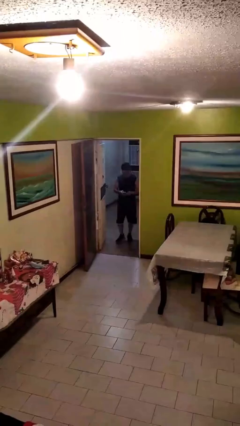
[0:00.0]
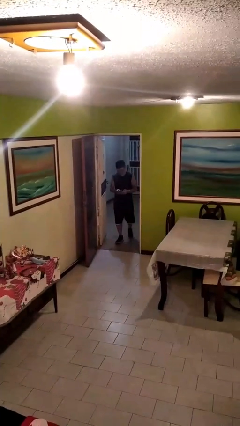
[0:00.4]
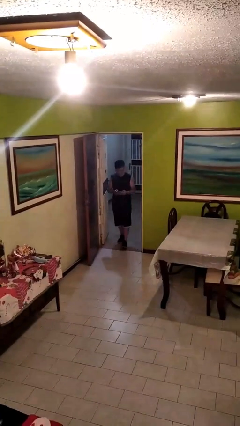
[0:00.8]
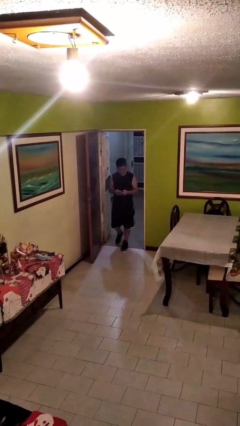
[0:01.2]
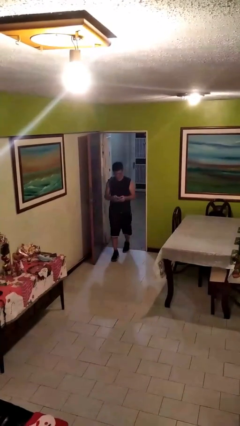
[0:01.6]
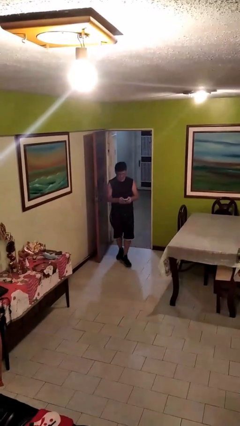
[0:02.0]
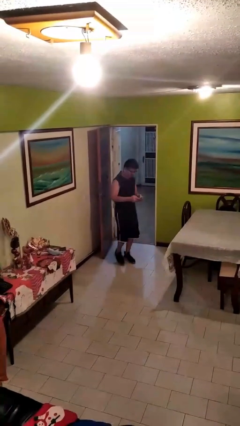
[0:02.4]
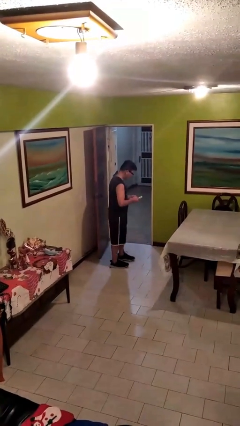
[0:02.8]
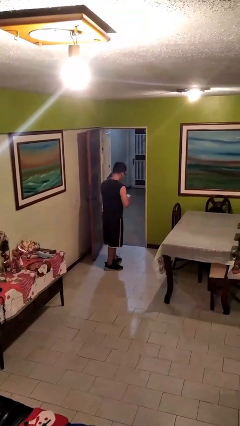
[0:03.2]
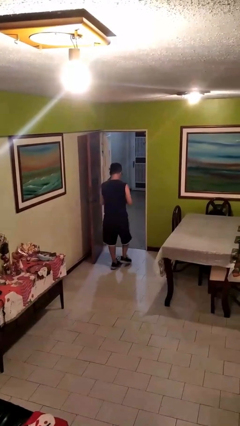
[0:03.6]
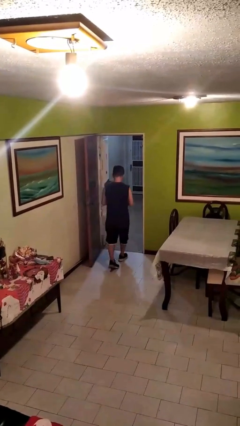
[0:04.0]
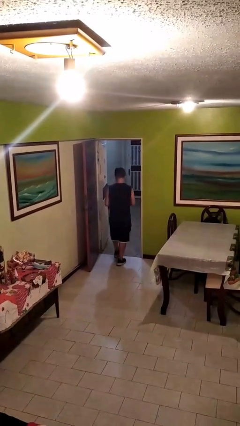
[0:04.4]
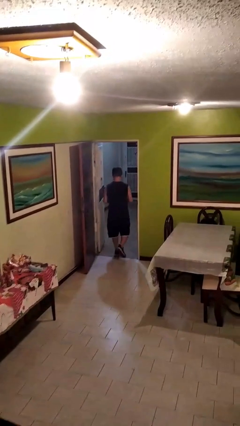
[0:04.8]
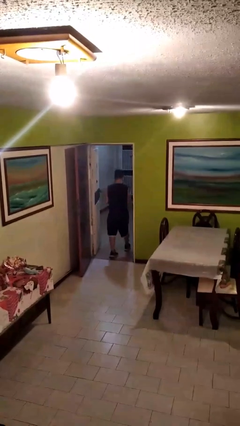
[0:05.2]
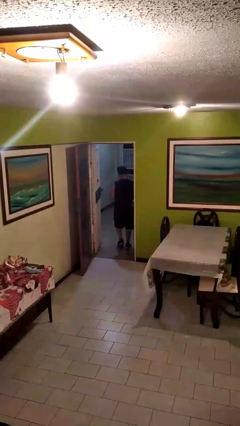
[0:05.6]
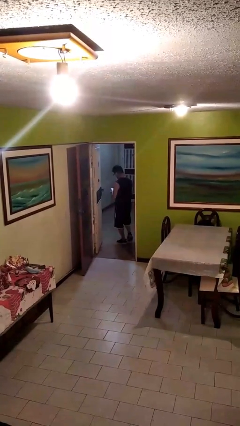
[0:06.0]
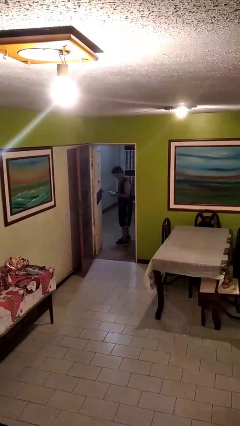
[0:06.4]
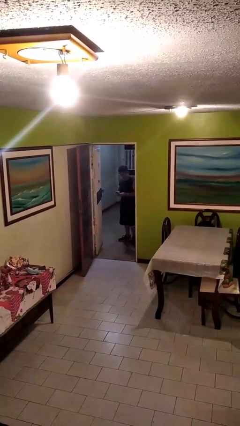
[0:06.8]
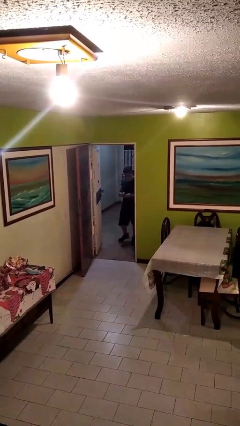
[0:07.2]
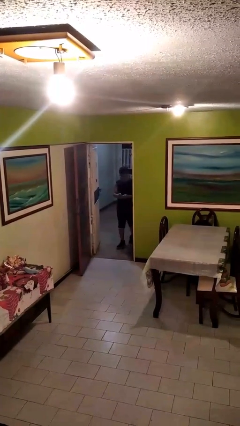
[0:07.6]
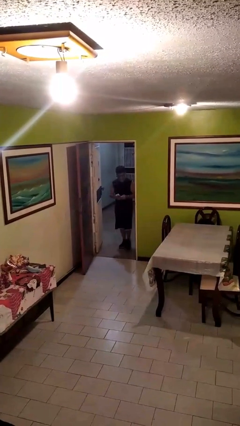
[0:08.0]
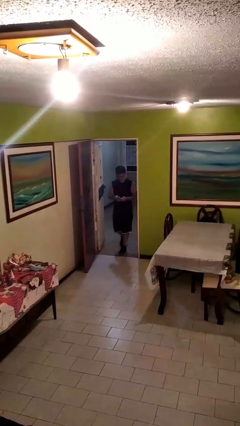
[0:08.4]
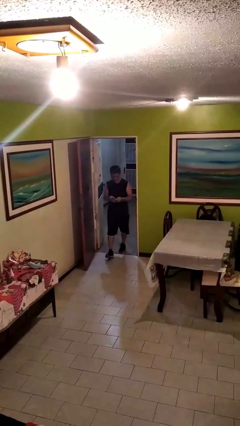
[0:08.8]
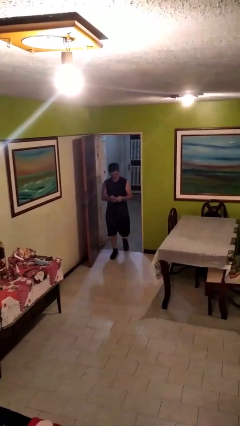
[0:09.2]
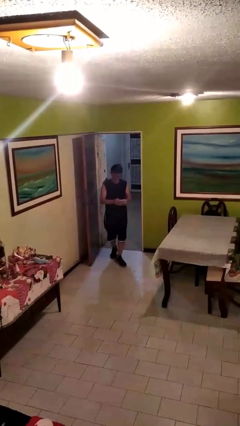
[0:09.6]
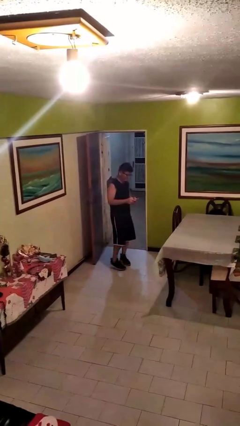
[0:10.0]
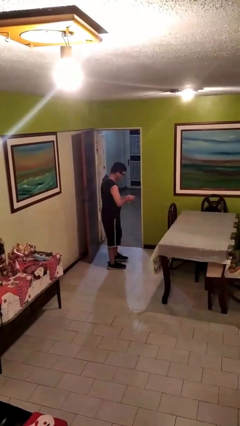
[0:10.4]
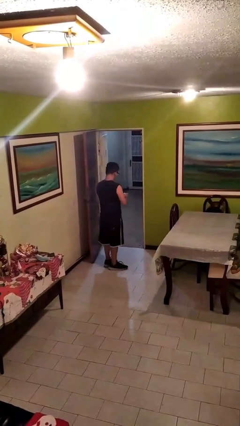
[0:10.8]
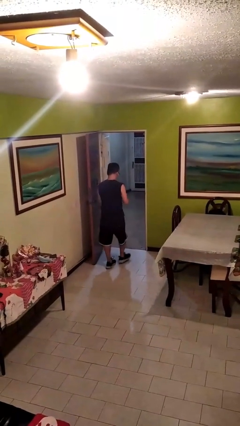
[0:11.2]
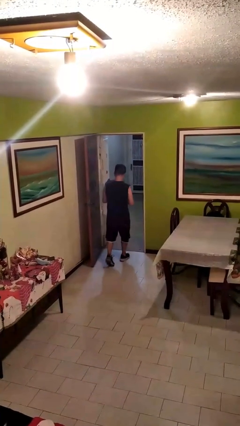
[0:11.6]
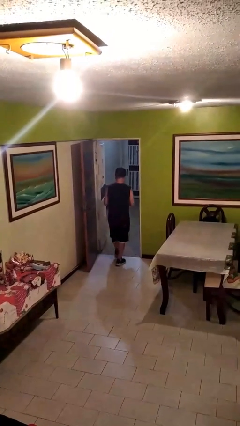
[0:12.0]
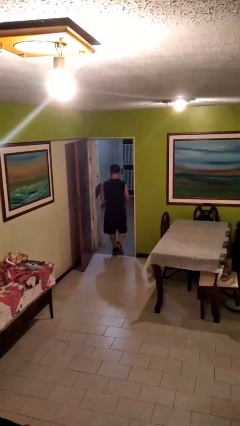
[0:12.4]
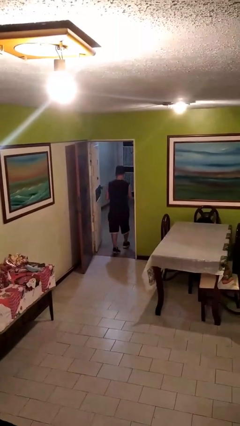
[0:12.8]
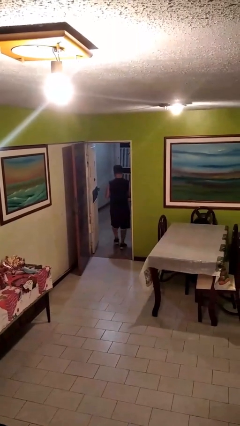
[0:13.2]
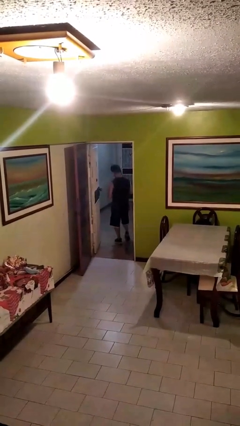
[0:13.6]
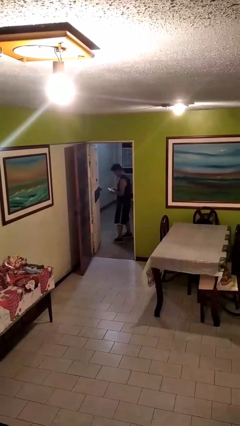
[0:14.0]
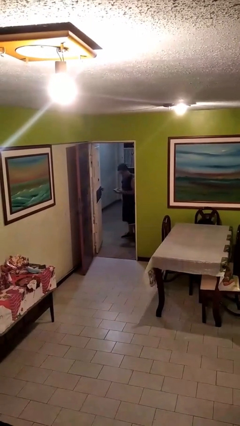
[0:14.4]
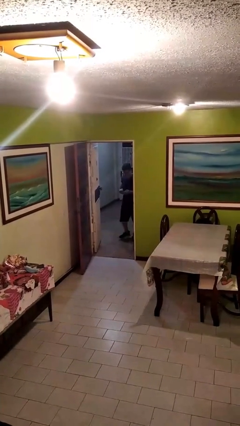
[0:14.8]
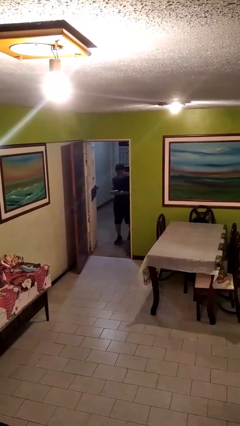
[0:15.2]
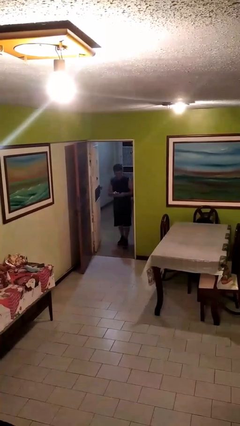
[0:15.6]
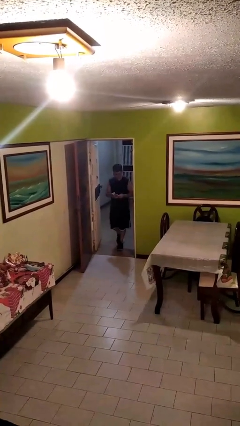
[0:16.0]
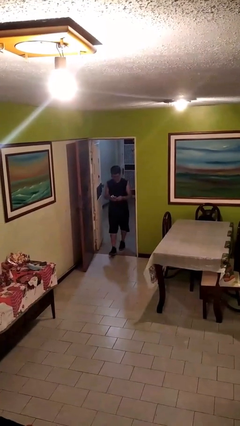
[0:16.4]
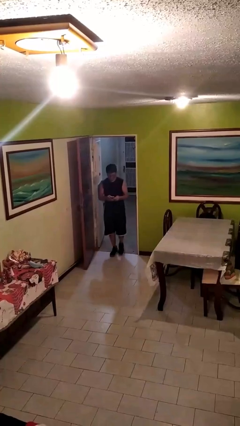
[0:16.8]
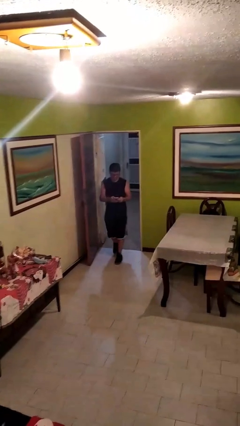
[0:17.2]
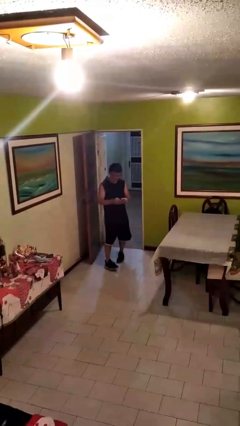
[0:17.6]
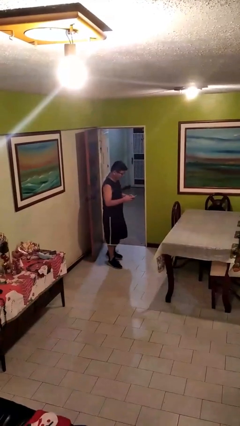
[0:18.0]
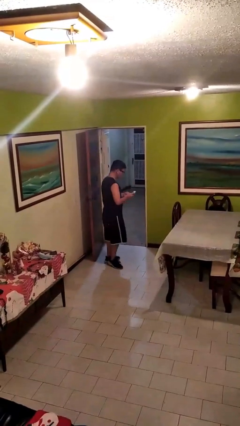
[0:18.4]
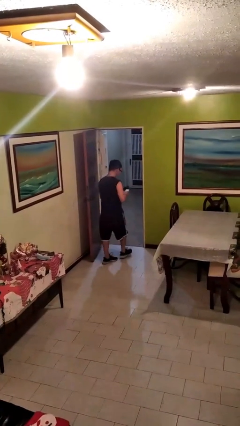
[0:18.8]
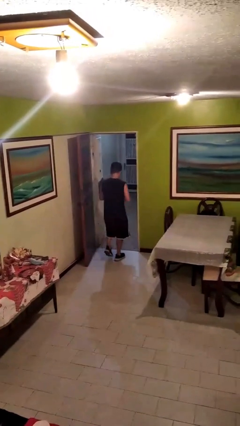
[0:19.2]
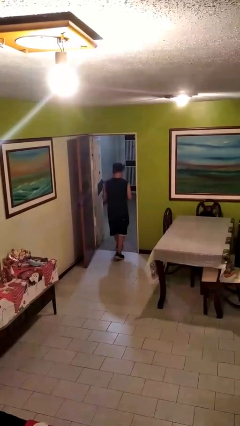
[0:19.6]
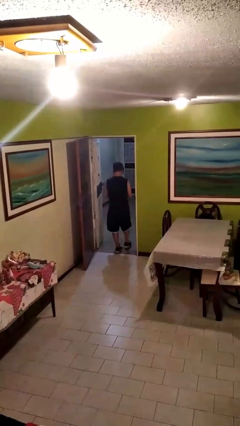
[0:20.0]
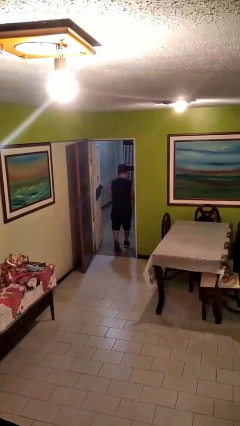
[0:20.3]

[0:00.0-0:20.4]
person texts on phone

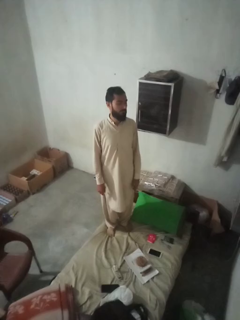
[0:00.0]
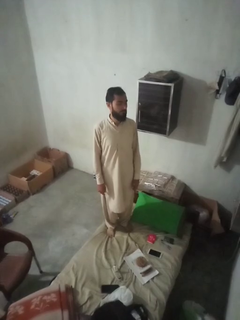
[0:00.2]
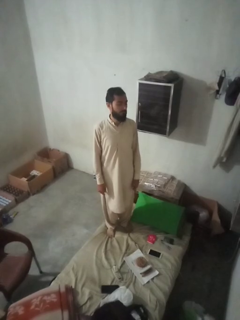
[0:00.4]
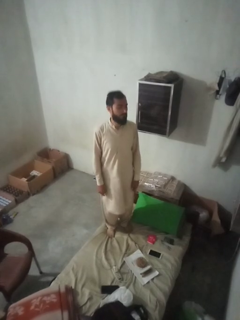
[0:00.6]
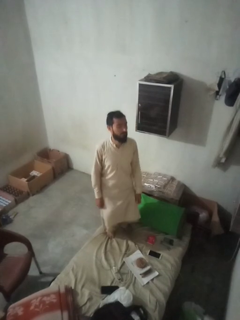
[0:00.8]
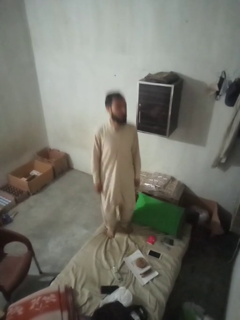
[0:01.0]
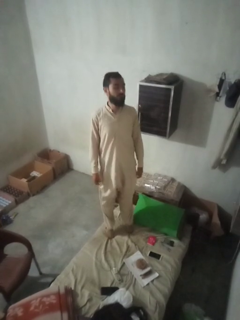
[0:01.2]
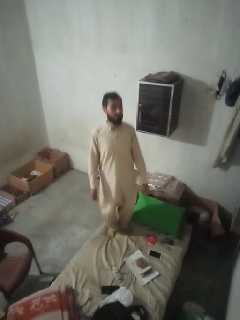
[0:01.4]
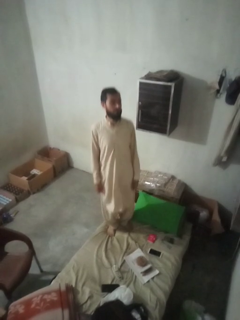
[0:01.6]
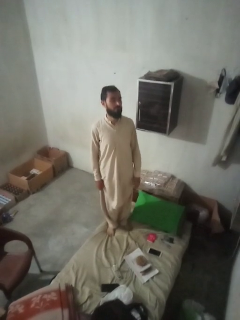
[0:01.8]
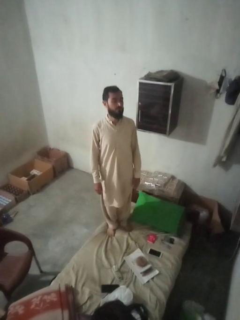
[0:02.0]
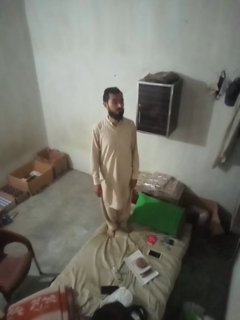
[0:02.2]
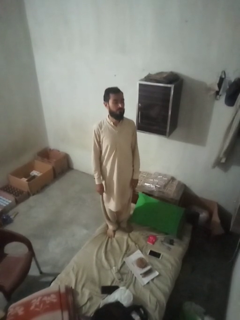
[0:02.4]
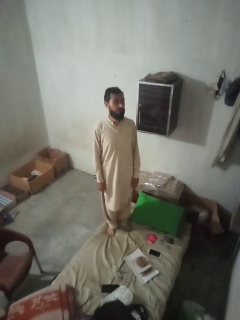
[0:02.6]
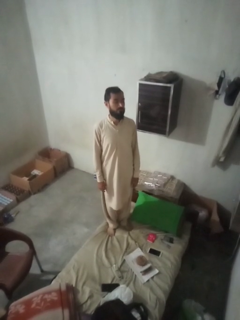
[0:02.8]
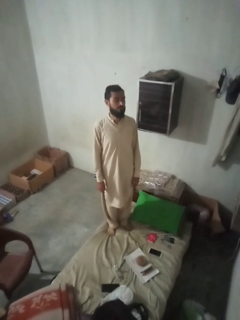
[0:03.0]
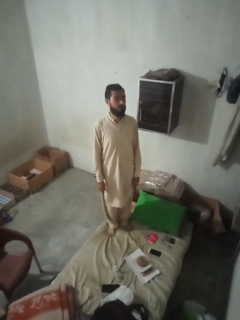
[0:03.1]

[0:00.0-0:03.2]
person jumps on bed

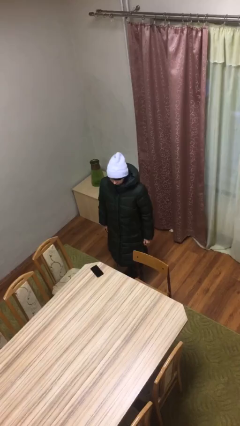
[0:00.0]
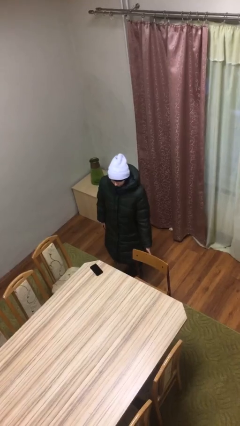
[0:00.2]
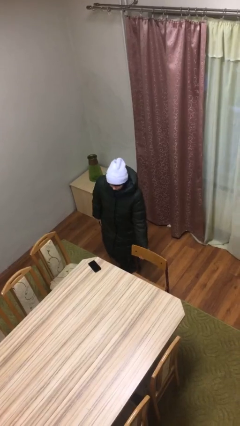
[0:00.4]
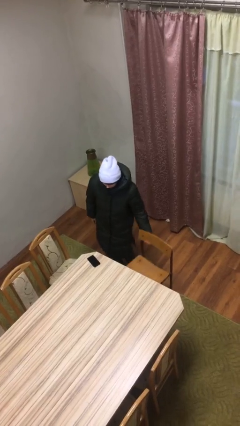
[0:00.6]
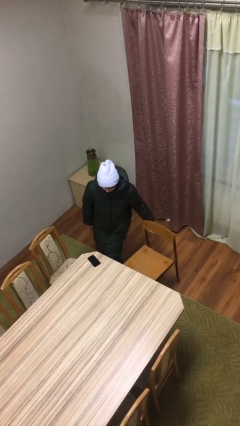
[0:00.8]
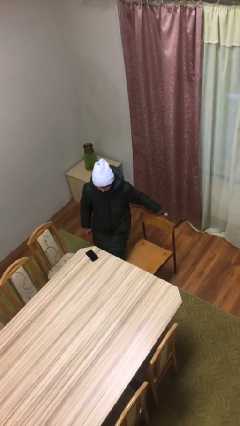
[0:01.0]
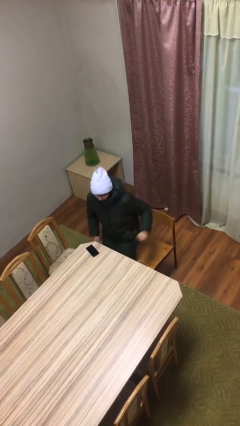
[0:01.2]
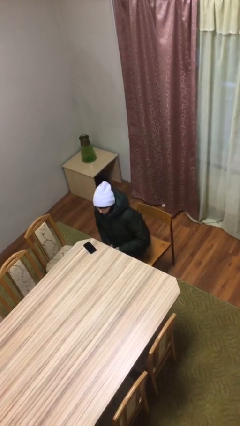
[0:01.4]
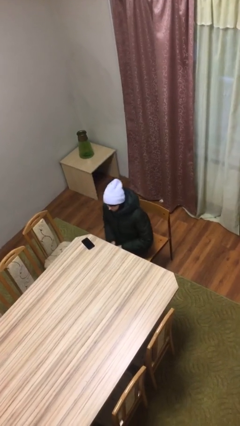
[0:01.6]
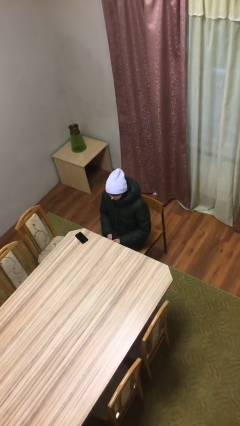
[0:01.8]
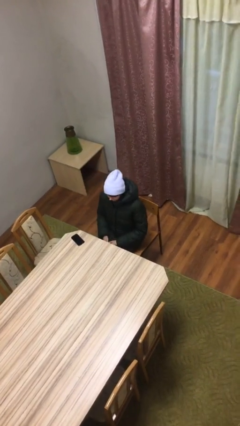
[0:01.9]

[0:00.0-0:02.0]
person sits down

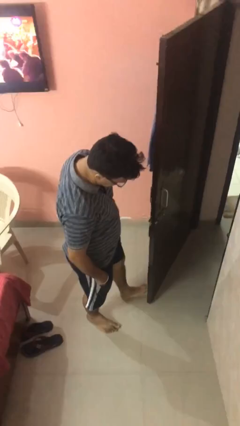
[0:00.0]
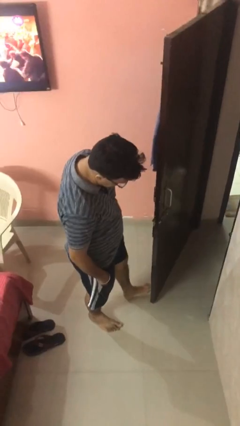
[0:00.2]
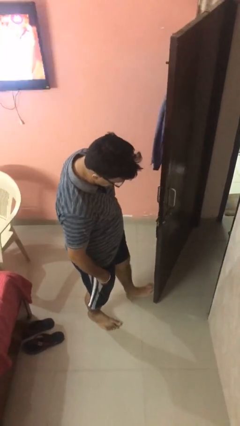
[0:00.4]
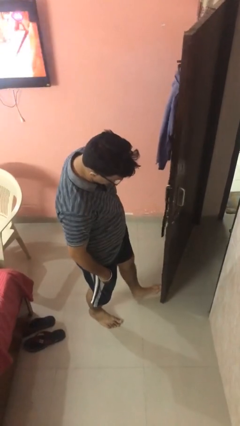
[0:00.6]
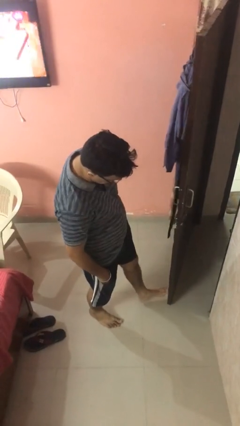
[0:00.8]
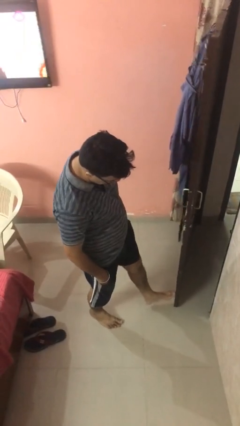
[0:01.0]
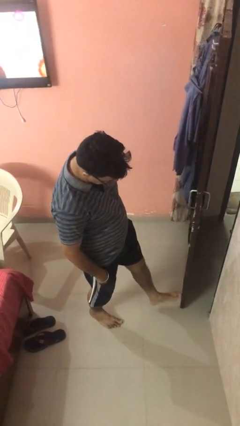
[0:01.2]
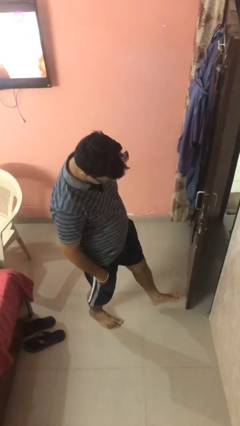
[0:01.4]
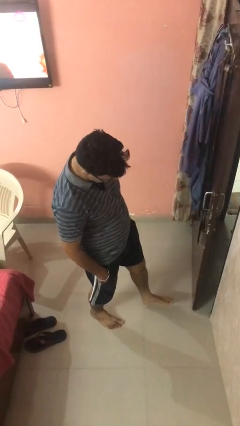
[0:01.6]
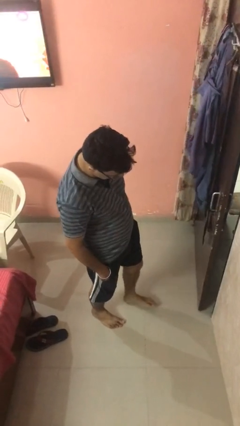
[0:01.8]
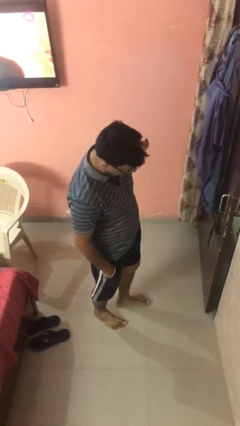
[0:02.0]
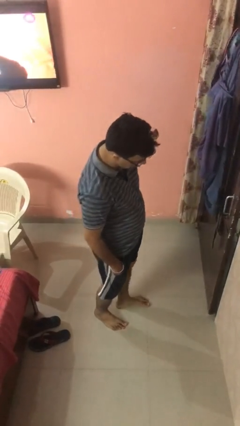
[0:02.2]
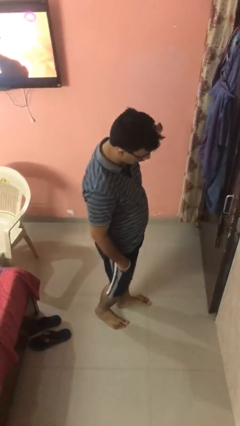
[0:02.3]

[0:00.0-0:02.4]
person closes door with foot

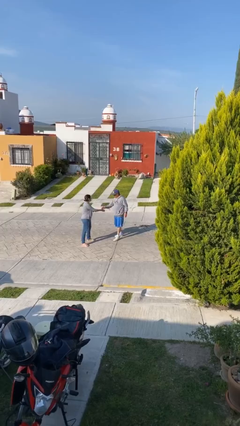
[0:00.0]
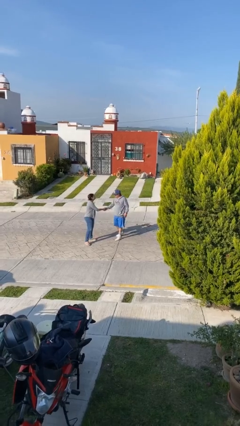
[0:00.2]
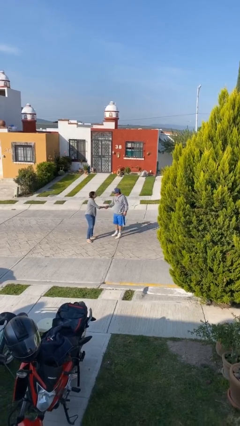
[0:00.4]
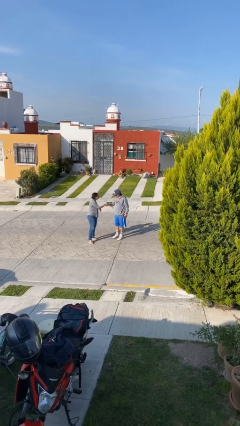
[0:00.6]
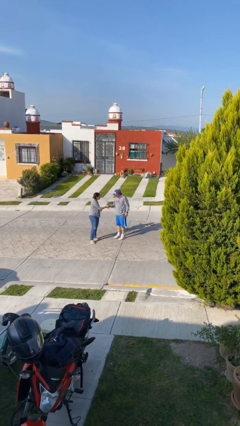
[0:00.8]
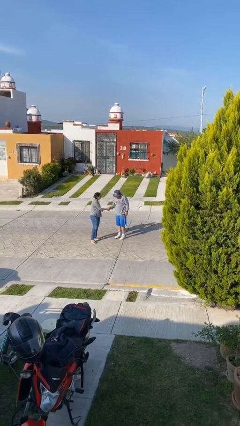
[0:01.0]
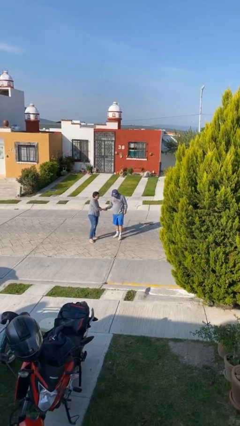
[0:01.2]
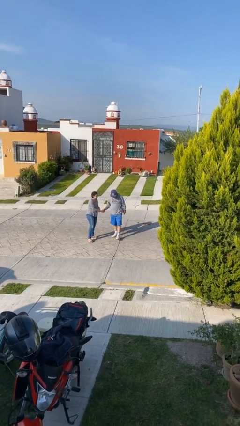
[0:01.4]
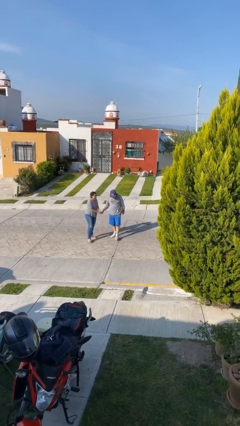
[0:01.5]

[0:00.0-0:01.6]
person shakes hand
